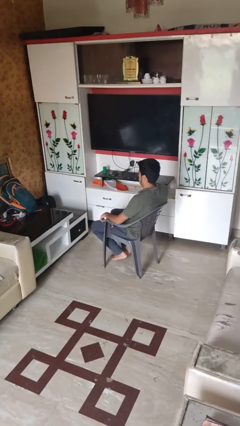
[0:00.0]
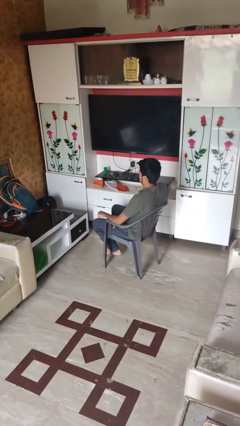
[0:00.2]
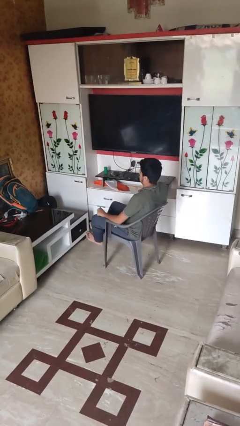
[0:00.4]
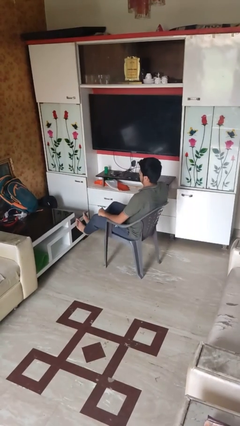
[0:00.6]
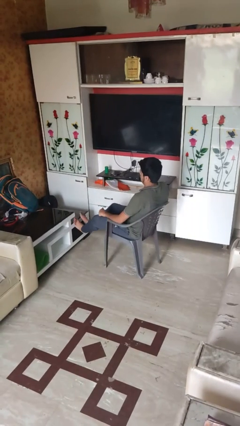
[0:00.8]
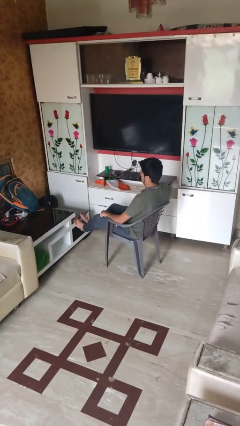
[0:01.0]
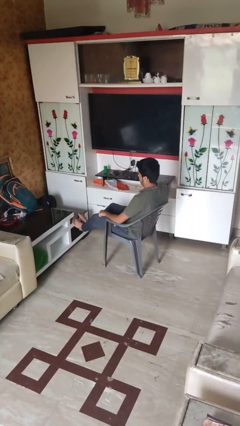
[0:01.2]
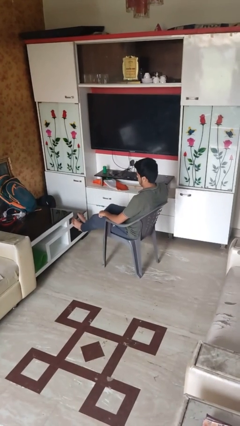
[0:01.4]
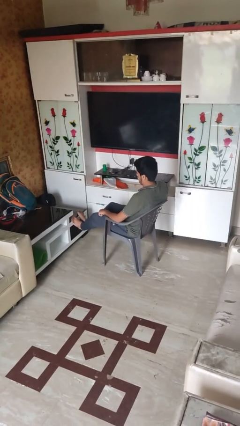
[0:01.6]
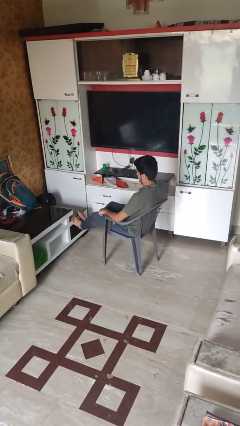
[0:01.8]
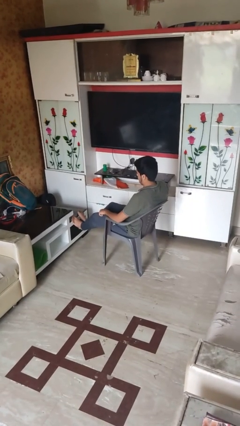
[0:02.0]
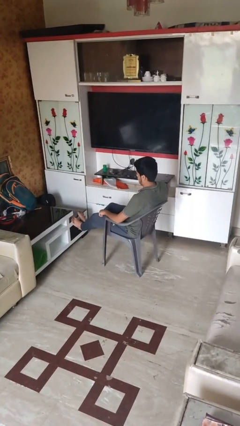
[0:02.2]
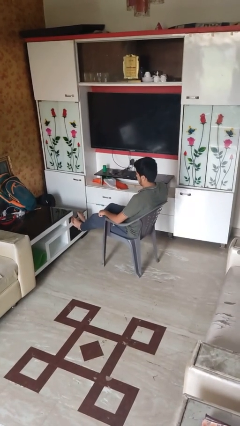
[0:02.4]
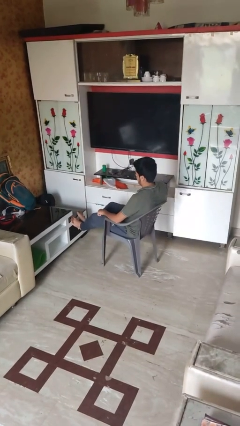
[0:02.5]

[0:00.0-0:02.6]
person puts feet up

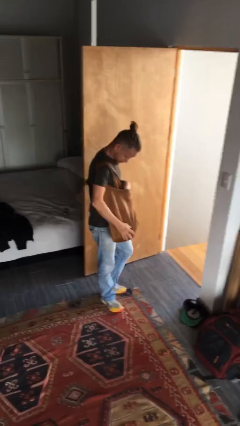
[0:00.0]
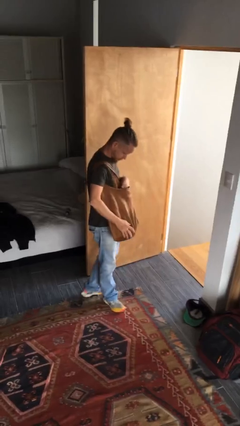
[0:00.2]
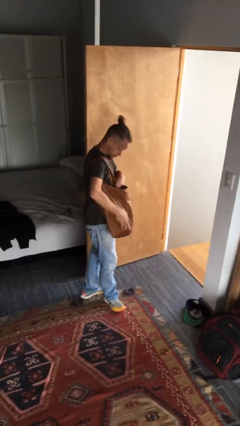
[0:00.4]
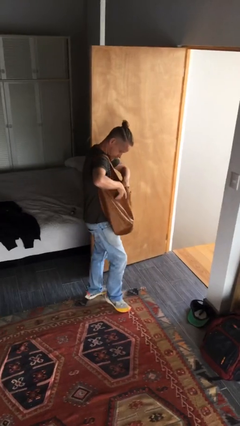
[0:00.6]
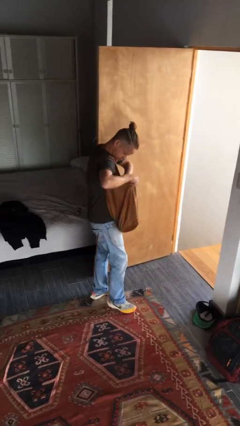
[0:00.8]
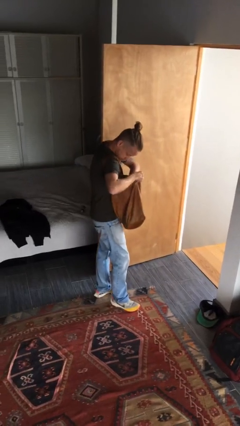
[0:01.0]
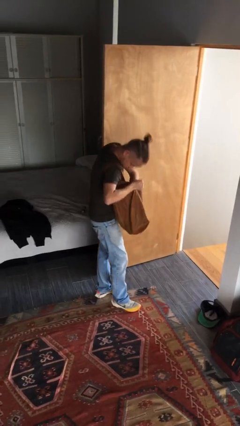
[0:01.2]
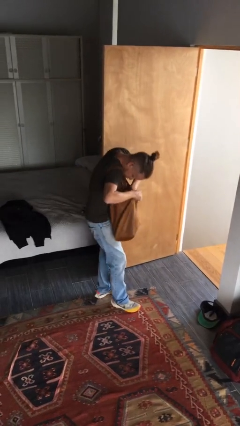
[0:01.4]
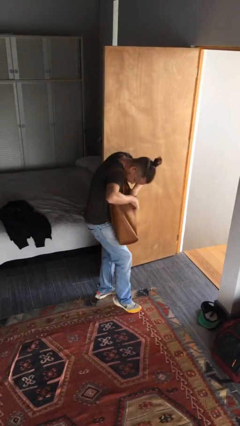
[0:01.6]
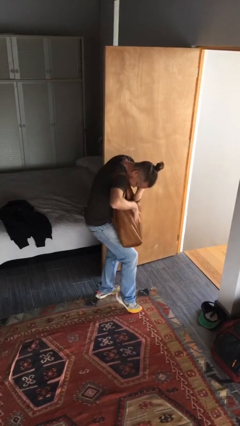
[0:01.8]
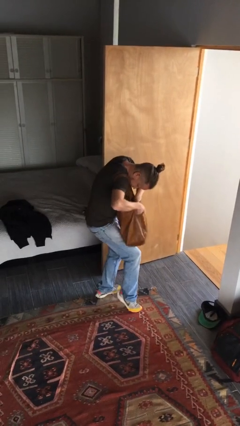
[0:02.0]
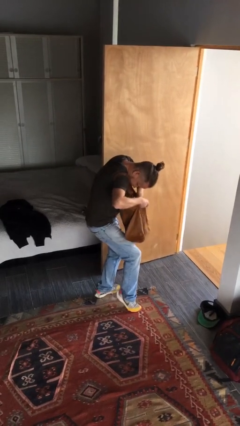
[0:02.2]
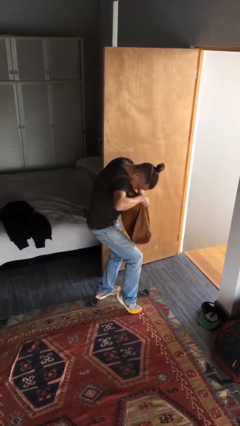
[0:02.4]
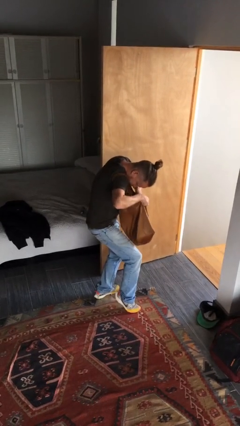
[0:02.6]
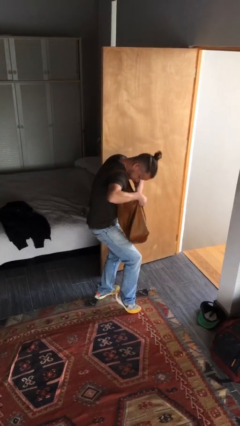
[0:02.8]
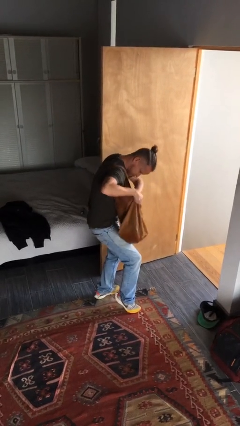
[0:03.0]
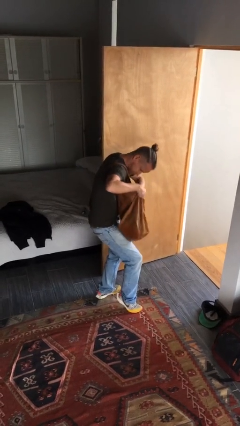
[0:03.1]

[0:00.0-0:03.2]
person searches in purse

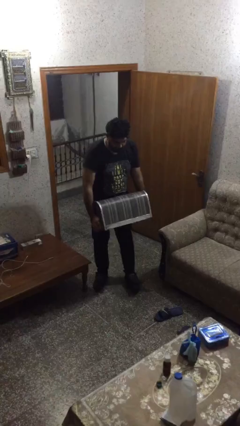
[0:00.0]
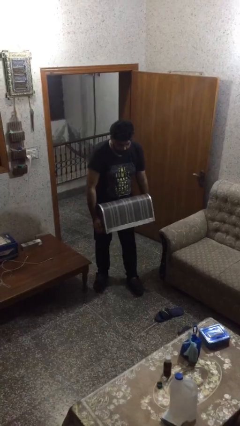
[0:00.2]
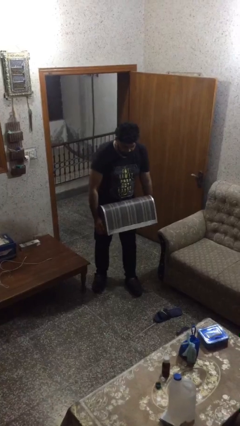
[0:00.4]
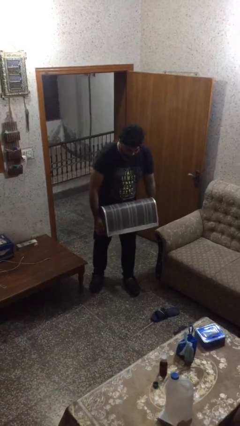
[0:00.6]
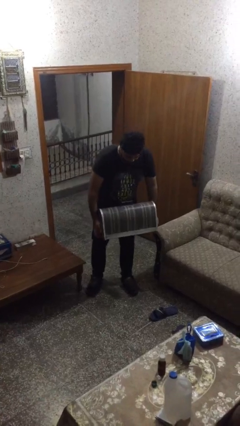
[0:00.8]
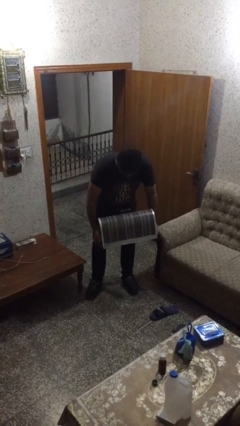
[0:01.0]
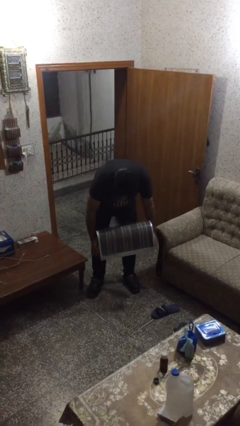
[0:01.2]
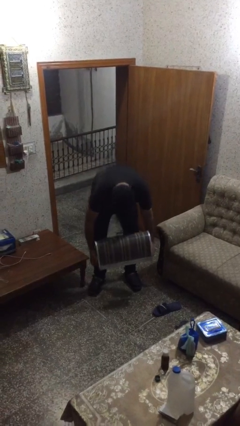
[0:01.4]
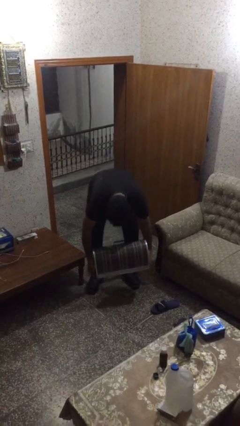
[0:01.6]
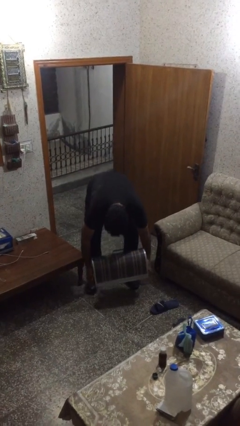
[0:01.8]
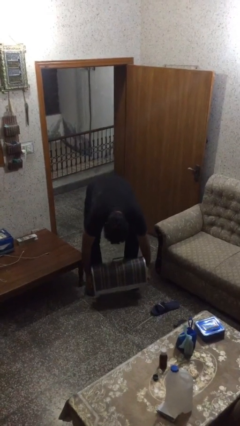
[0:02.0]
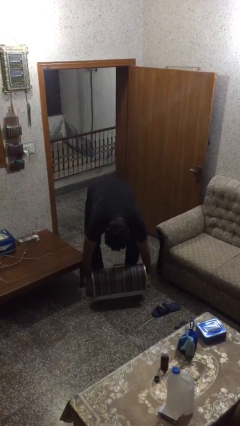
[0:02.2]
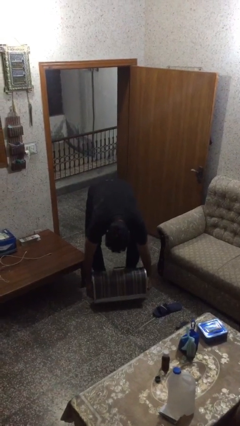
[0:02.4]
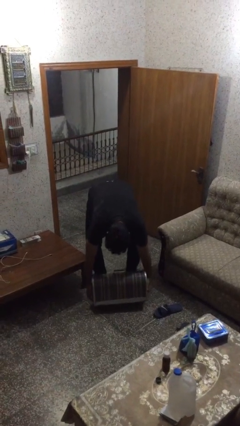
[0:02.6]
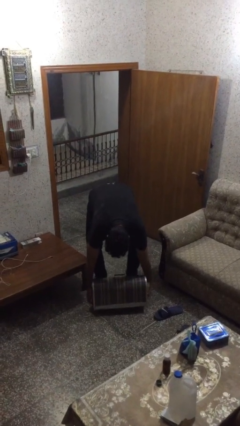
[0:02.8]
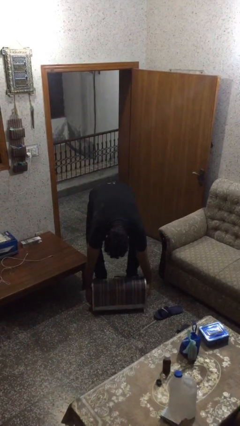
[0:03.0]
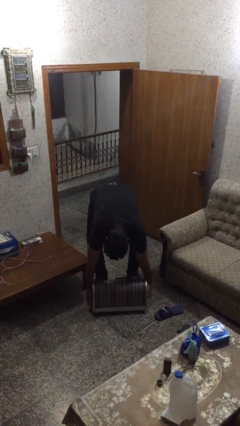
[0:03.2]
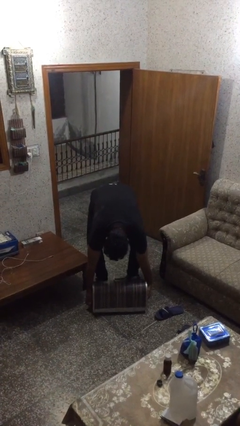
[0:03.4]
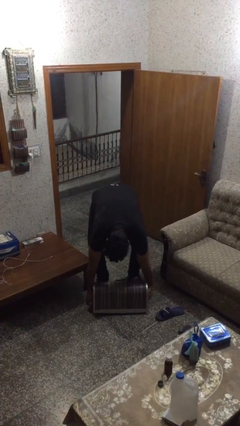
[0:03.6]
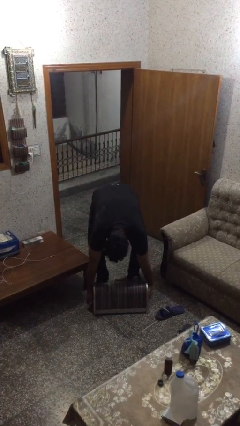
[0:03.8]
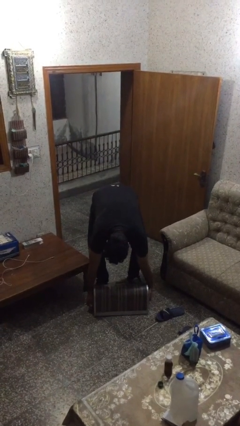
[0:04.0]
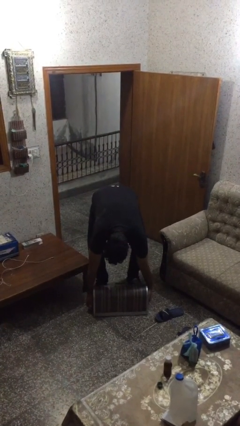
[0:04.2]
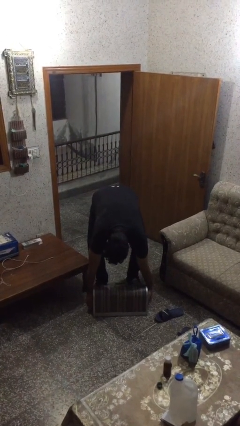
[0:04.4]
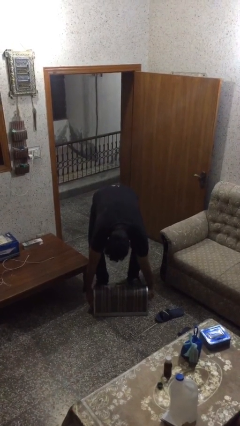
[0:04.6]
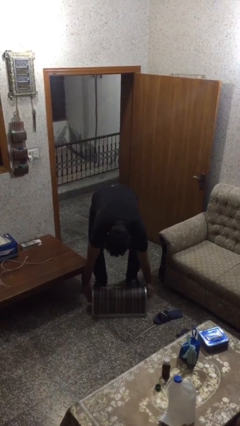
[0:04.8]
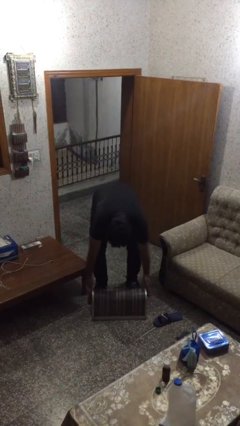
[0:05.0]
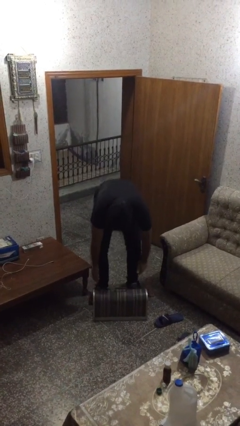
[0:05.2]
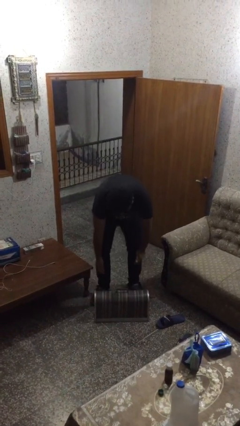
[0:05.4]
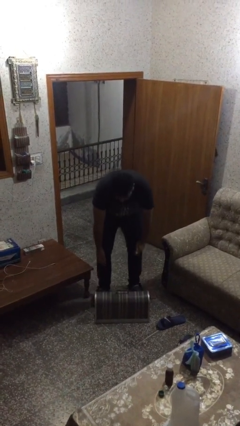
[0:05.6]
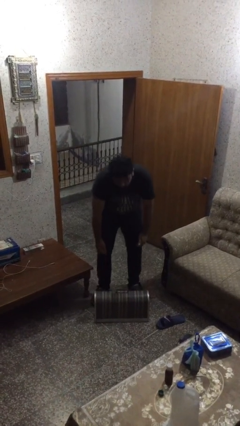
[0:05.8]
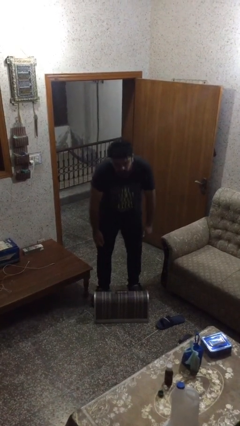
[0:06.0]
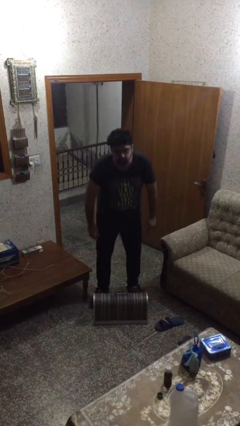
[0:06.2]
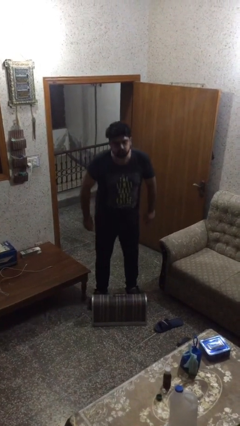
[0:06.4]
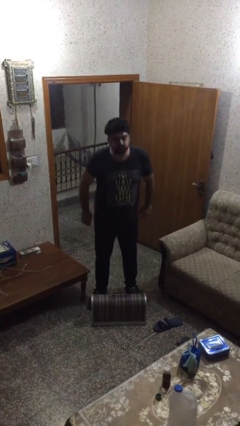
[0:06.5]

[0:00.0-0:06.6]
person puts down object on floor

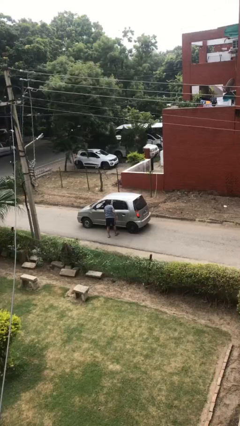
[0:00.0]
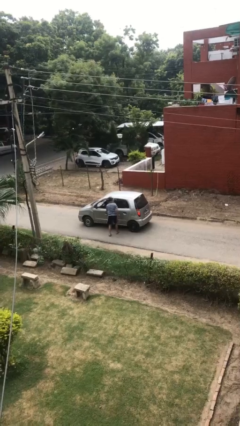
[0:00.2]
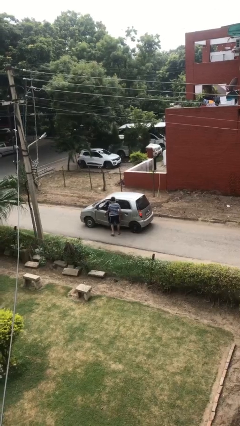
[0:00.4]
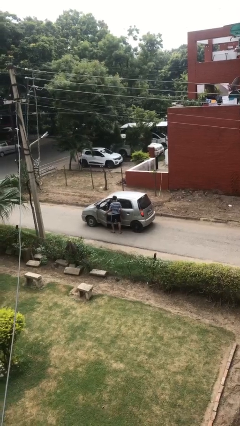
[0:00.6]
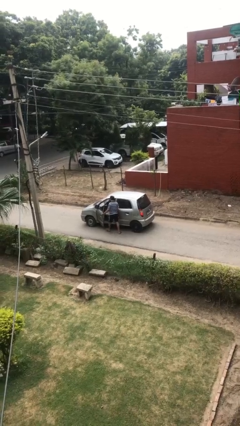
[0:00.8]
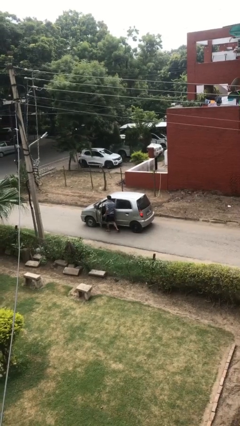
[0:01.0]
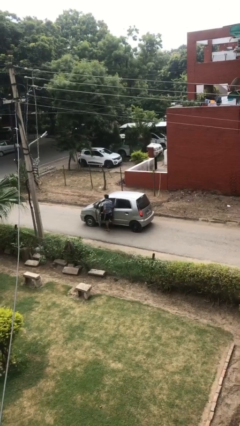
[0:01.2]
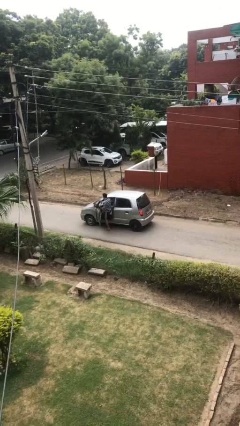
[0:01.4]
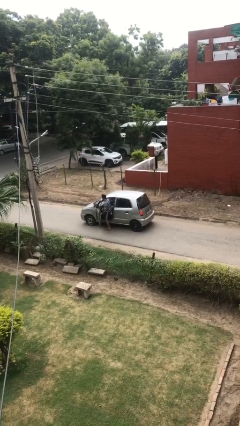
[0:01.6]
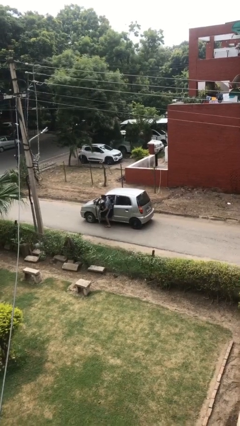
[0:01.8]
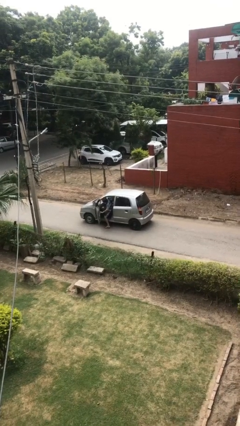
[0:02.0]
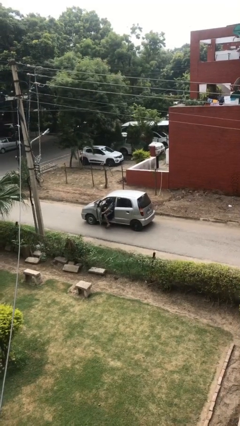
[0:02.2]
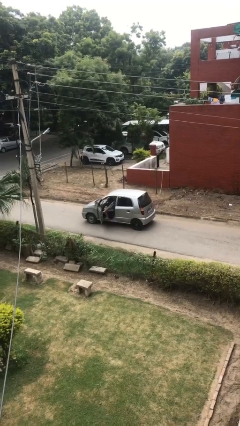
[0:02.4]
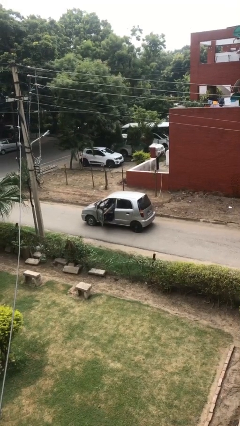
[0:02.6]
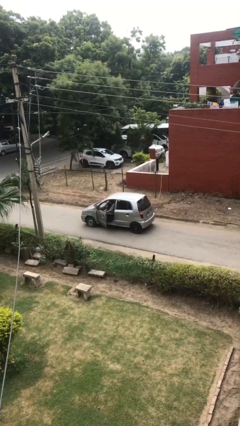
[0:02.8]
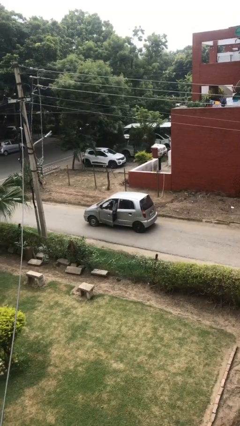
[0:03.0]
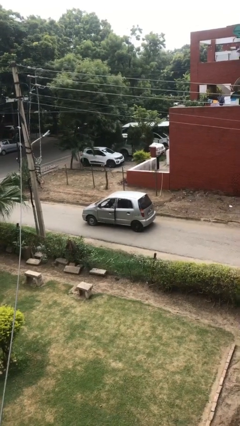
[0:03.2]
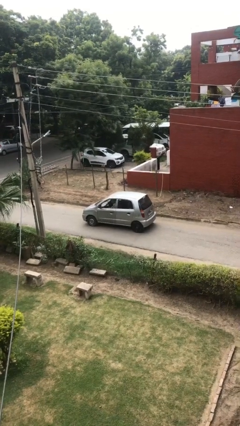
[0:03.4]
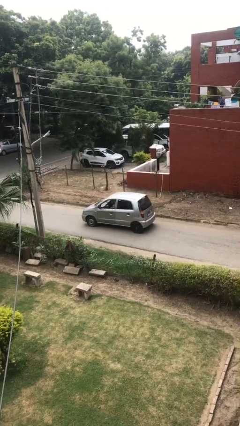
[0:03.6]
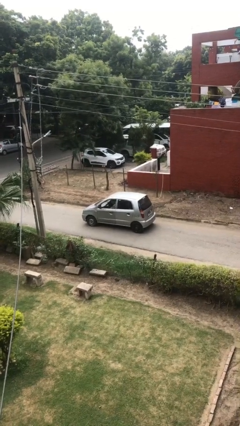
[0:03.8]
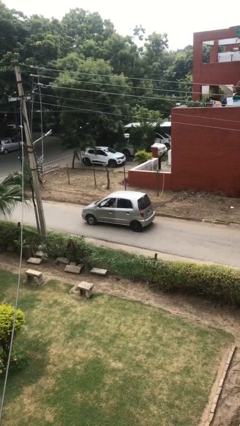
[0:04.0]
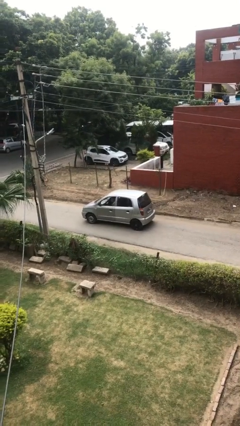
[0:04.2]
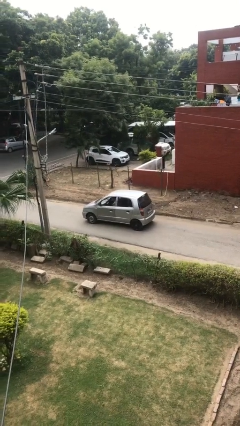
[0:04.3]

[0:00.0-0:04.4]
car picks up person

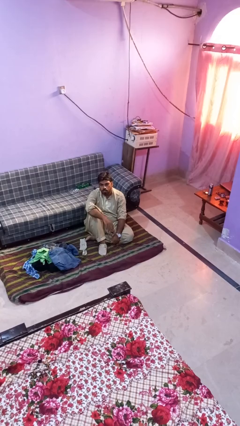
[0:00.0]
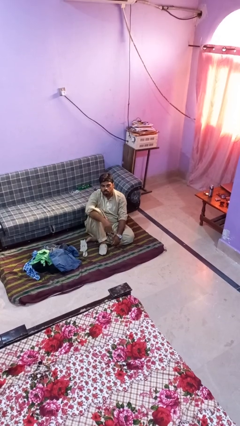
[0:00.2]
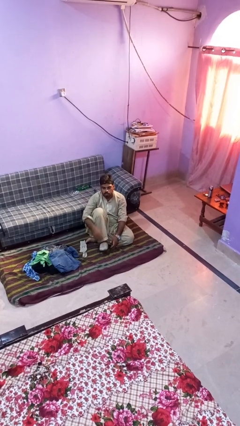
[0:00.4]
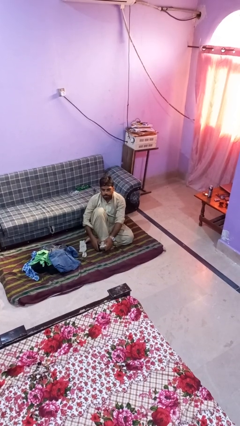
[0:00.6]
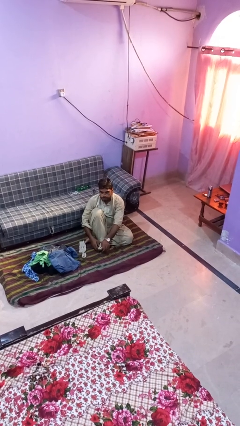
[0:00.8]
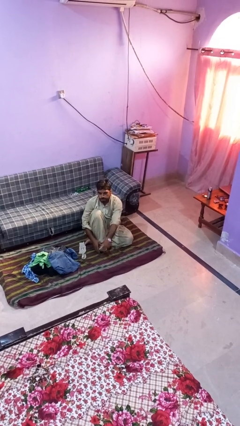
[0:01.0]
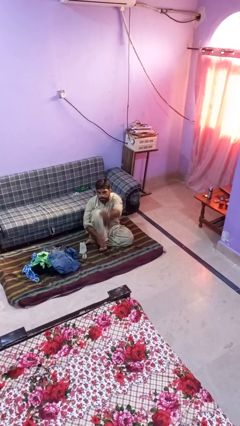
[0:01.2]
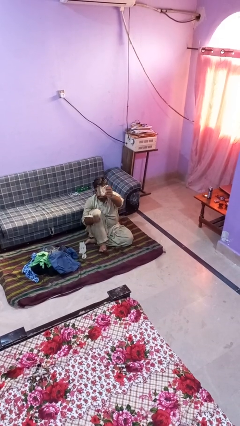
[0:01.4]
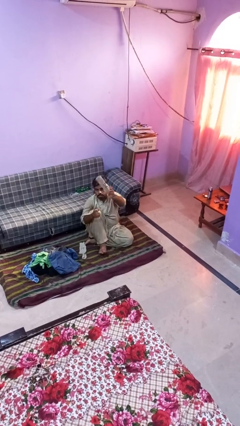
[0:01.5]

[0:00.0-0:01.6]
person takes off socks
